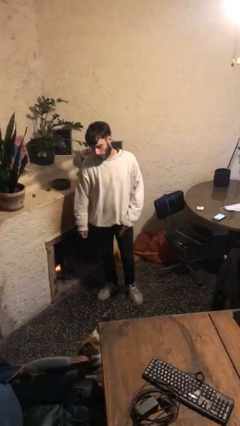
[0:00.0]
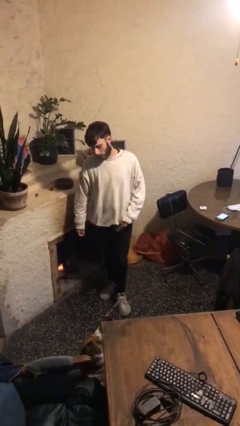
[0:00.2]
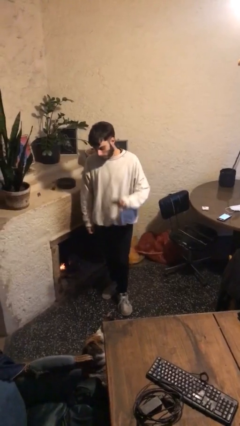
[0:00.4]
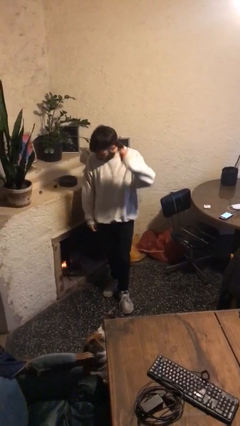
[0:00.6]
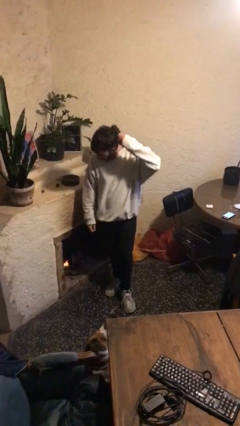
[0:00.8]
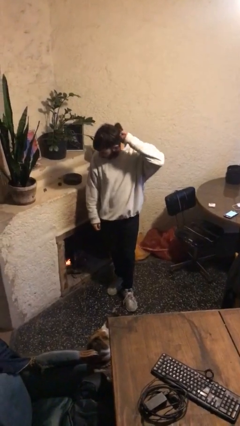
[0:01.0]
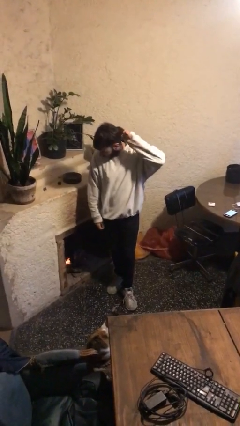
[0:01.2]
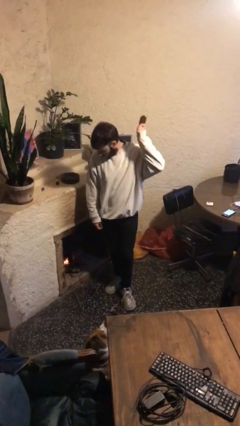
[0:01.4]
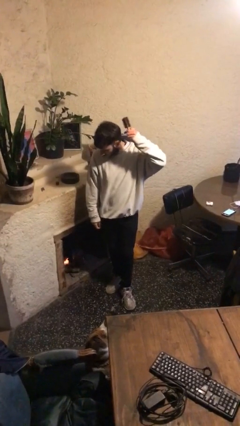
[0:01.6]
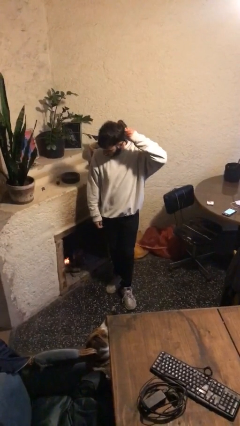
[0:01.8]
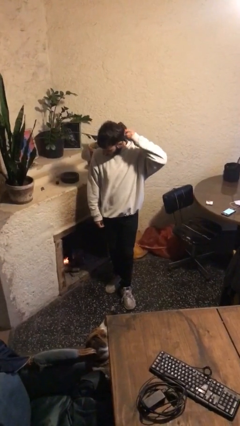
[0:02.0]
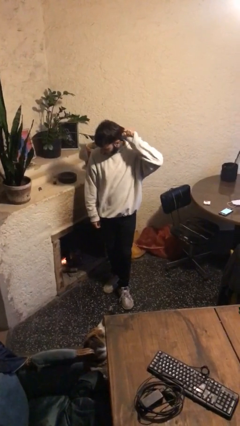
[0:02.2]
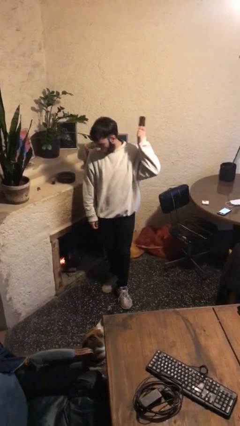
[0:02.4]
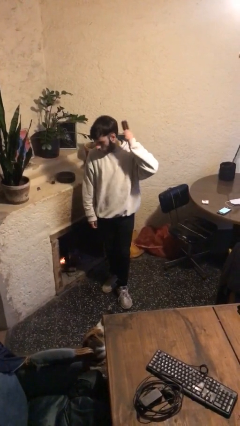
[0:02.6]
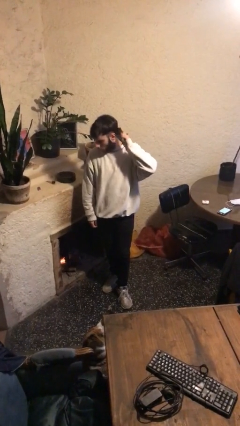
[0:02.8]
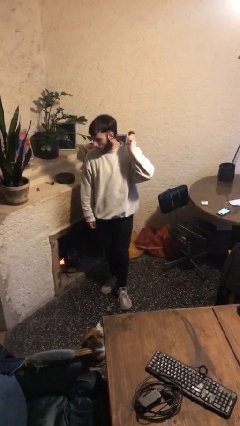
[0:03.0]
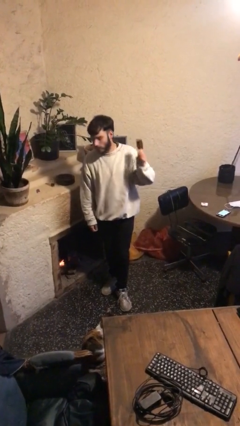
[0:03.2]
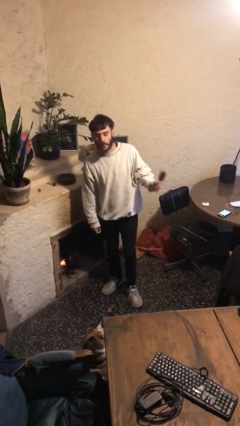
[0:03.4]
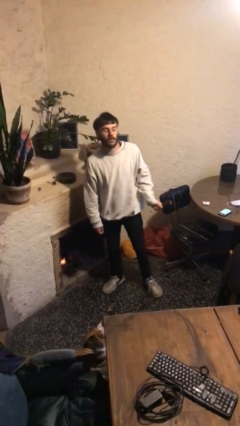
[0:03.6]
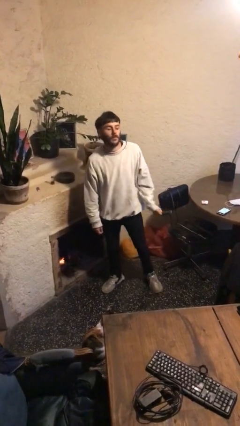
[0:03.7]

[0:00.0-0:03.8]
person brushes hair

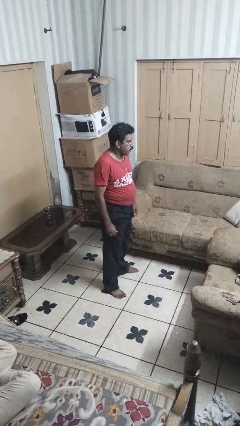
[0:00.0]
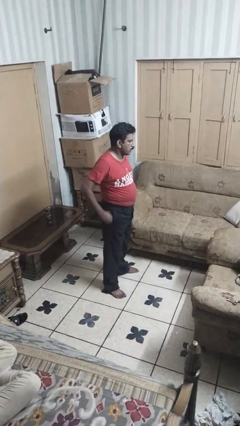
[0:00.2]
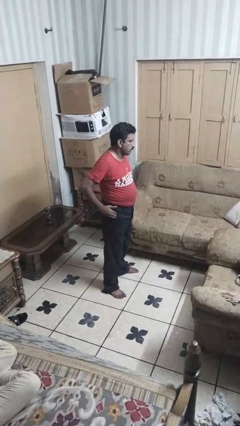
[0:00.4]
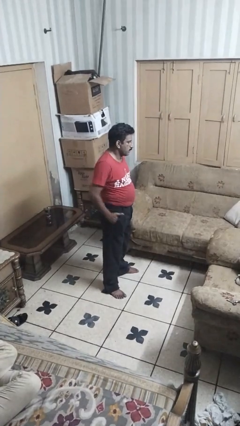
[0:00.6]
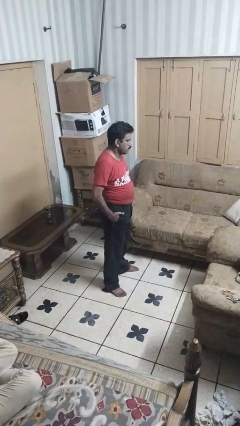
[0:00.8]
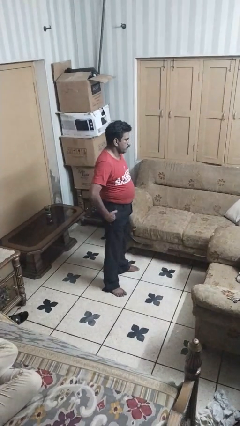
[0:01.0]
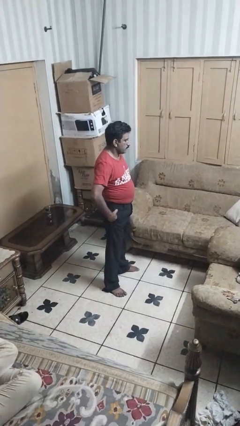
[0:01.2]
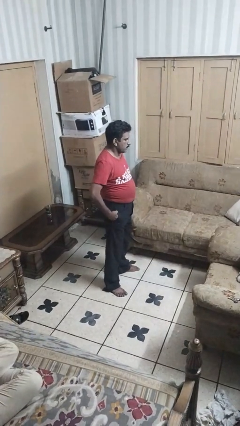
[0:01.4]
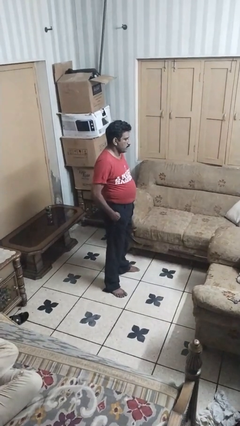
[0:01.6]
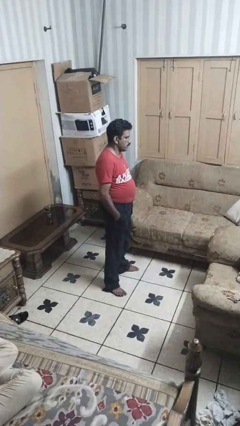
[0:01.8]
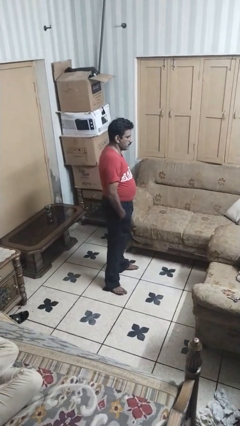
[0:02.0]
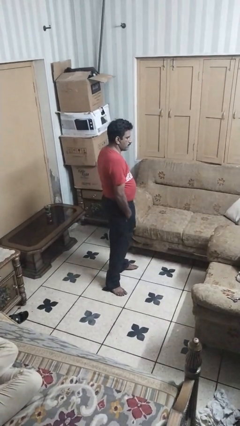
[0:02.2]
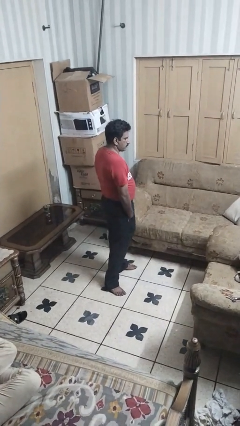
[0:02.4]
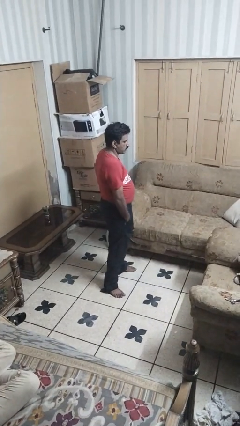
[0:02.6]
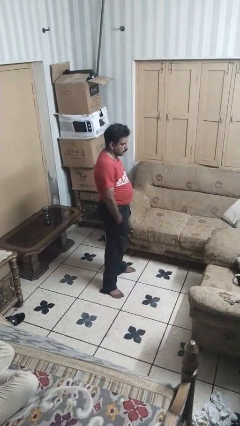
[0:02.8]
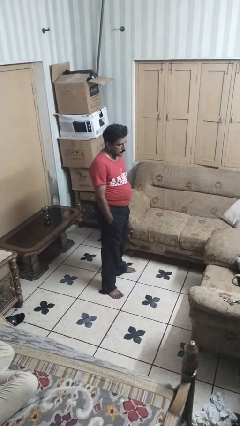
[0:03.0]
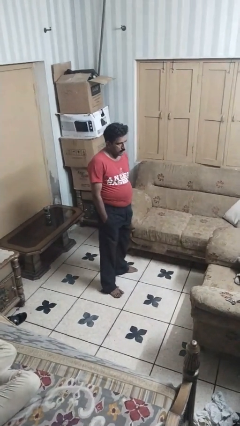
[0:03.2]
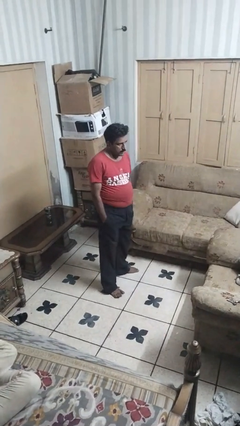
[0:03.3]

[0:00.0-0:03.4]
person puts hands in back pockets

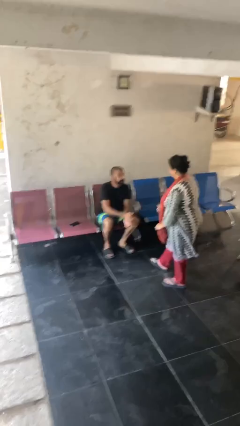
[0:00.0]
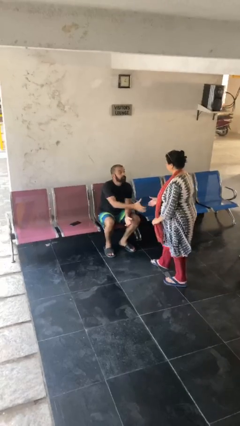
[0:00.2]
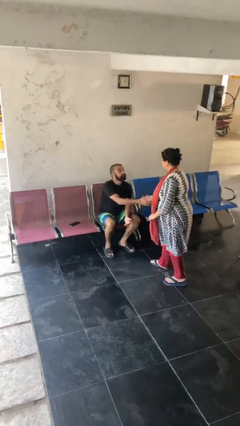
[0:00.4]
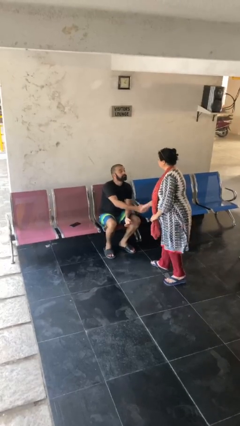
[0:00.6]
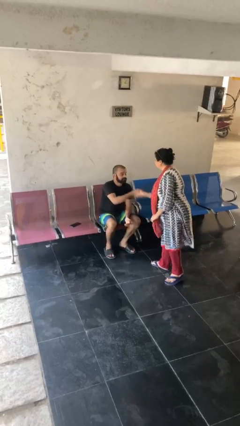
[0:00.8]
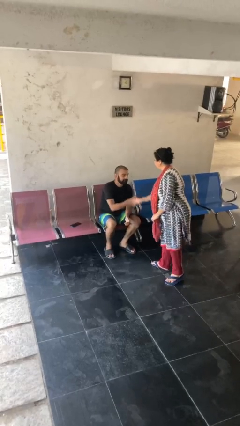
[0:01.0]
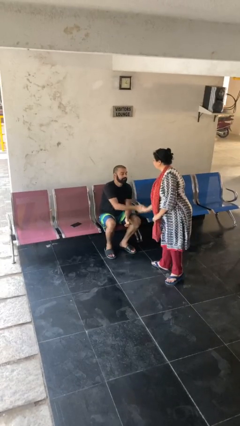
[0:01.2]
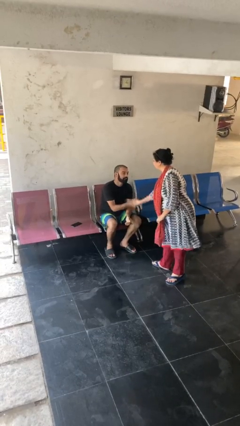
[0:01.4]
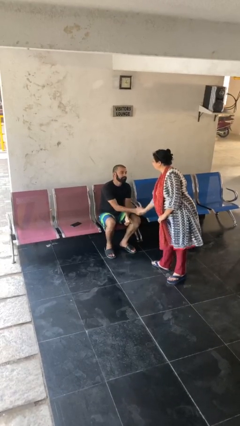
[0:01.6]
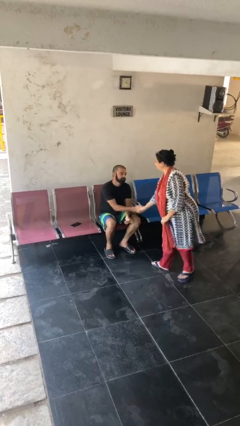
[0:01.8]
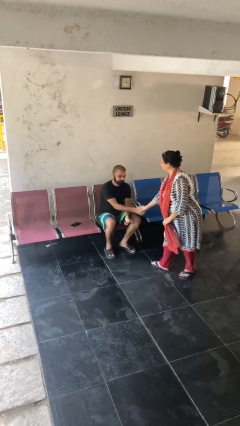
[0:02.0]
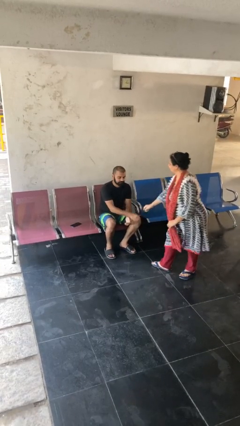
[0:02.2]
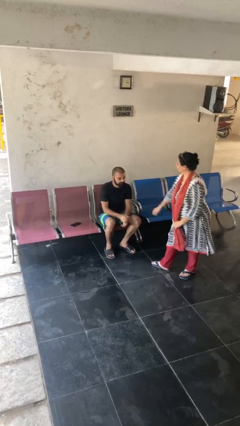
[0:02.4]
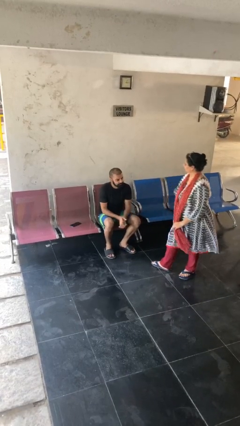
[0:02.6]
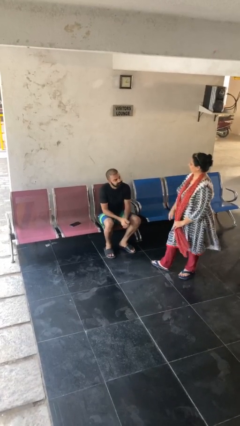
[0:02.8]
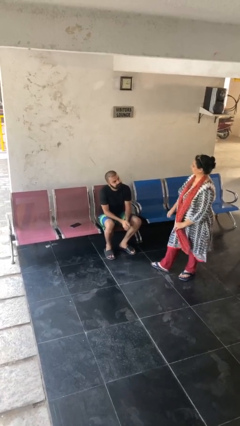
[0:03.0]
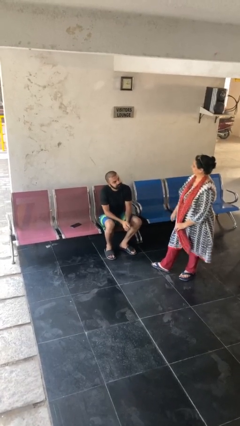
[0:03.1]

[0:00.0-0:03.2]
person shakes hand

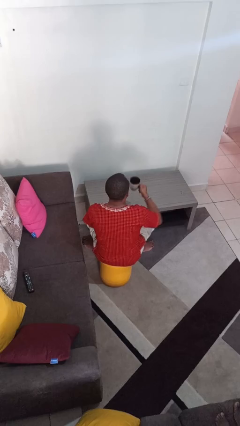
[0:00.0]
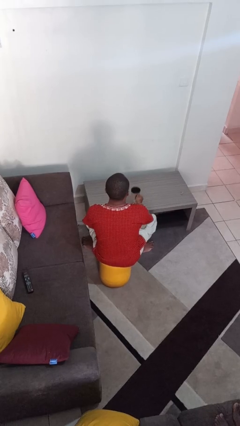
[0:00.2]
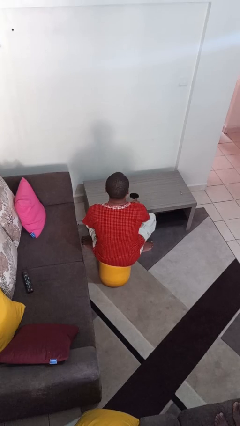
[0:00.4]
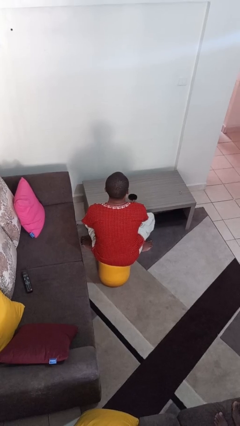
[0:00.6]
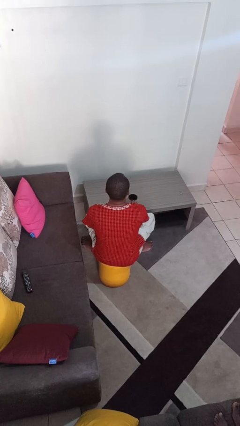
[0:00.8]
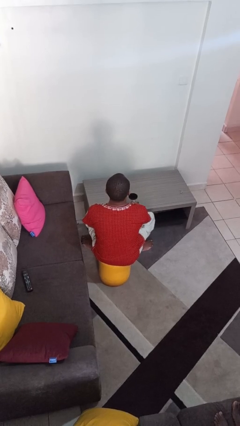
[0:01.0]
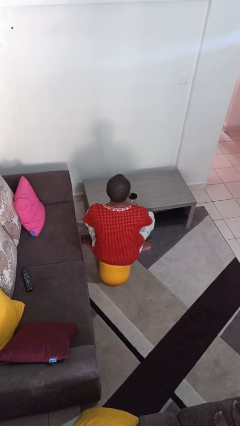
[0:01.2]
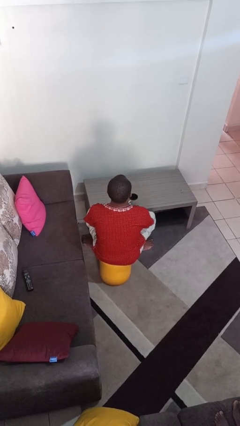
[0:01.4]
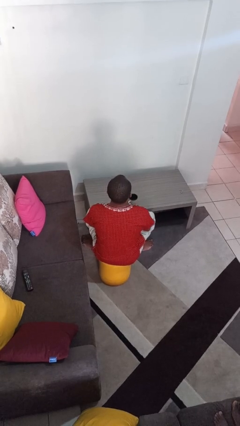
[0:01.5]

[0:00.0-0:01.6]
person puts down object on table

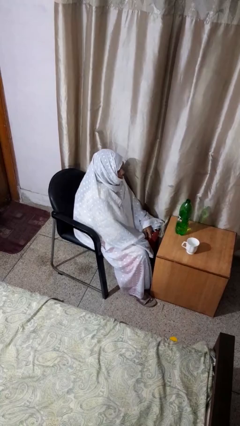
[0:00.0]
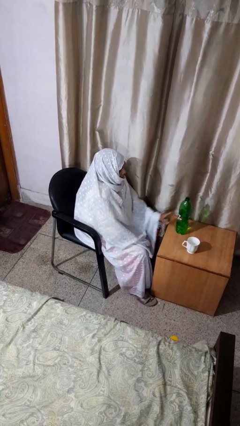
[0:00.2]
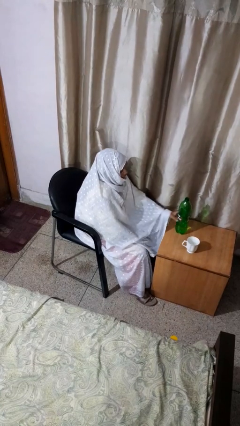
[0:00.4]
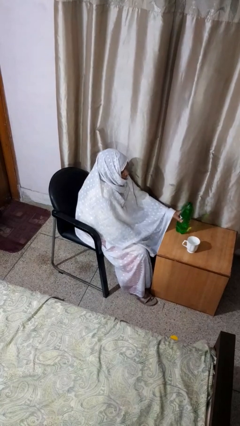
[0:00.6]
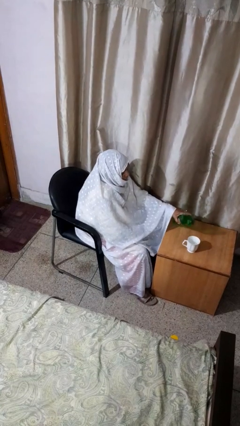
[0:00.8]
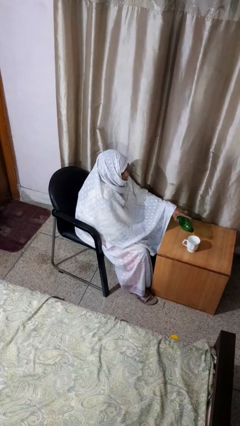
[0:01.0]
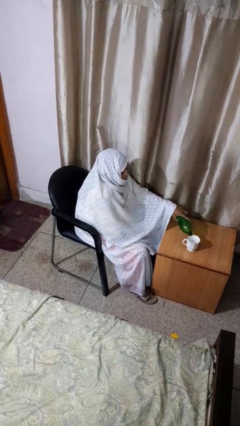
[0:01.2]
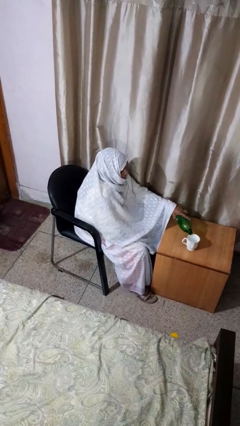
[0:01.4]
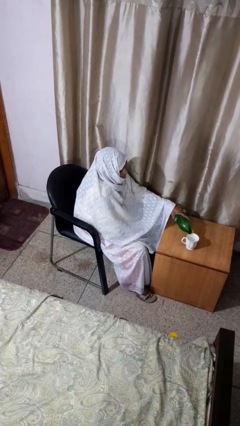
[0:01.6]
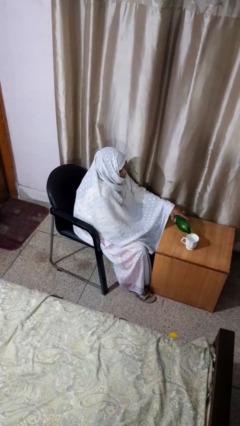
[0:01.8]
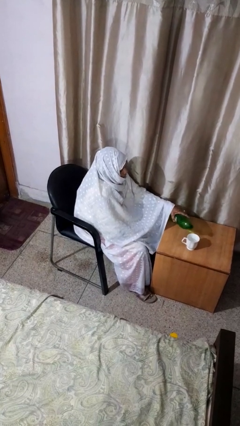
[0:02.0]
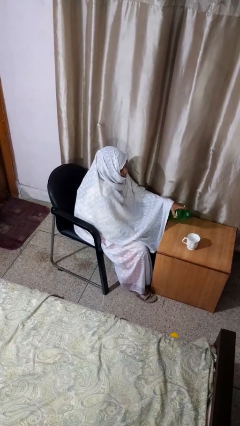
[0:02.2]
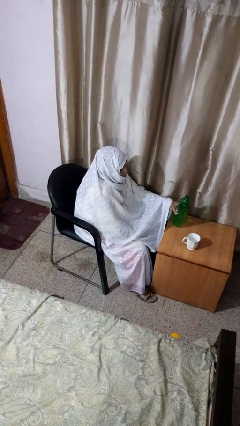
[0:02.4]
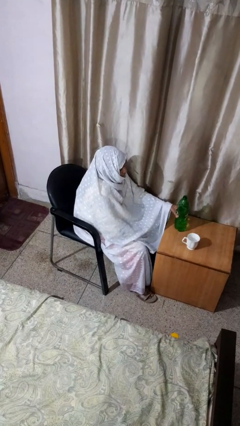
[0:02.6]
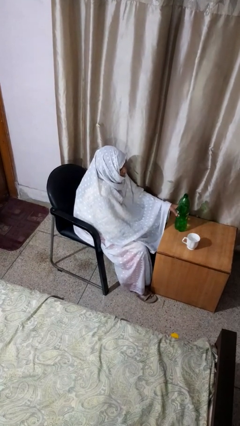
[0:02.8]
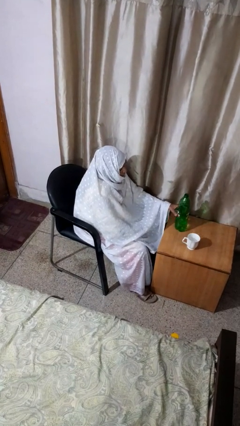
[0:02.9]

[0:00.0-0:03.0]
person pours liquid into cup

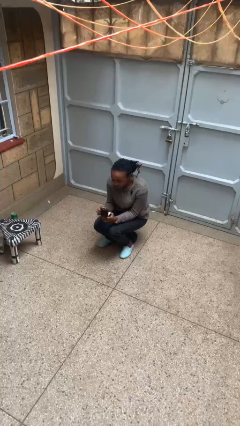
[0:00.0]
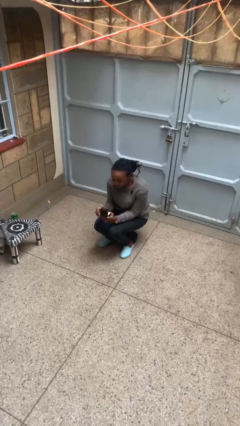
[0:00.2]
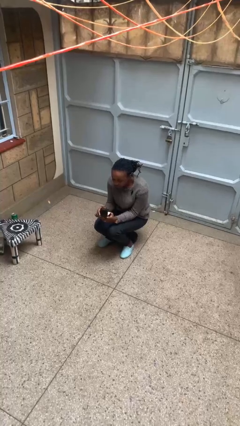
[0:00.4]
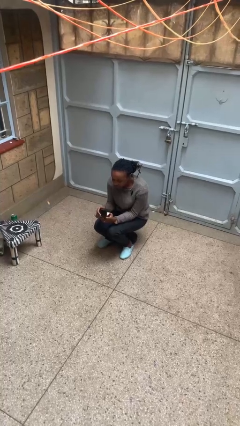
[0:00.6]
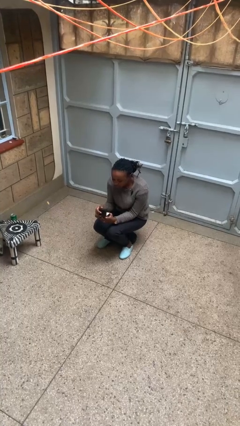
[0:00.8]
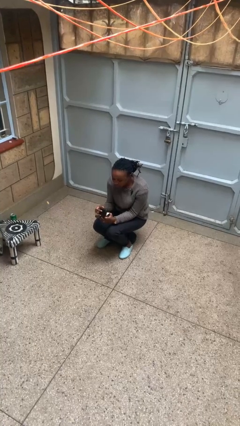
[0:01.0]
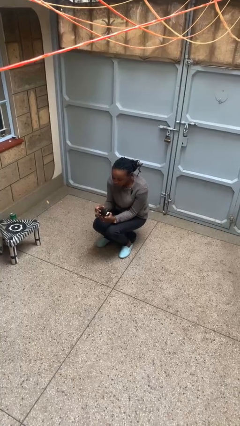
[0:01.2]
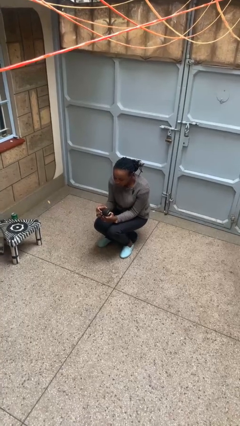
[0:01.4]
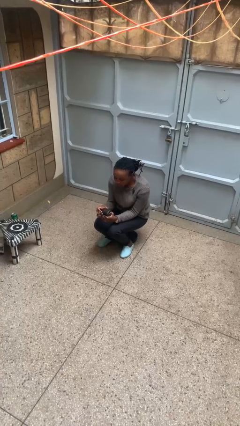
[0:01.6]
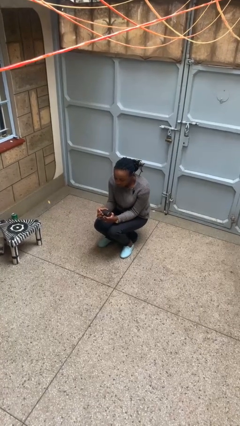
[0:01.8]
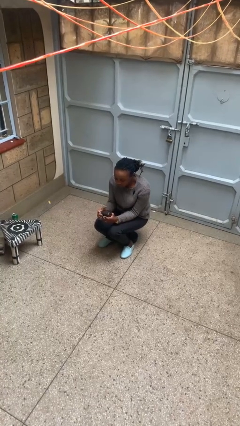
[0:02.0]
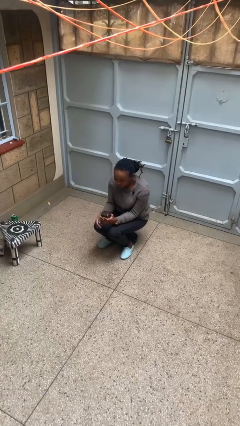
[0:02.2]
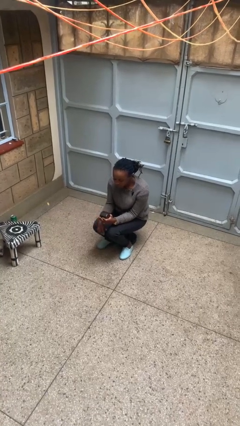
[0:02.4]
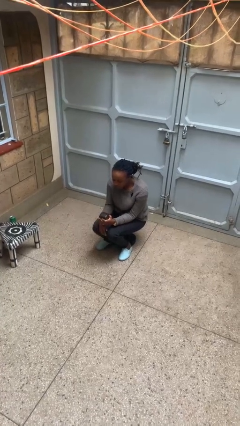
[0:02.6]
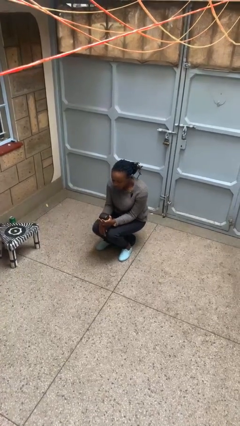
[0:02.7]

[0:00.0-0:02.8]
person closes jewelry box
